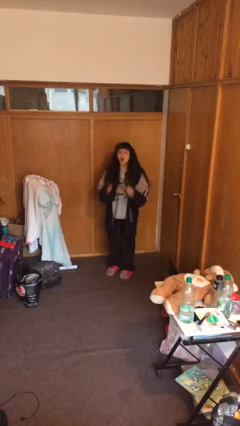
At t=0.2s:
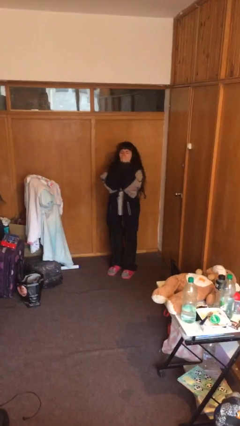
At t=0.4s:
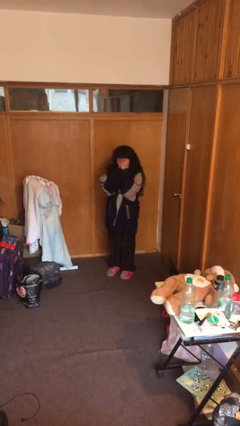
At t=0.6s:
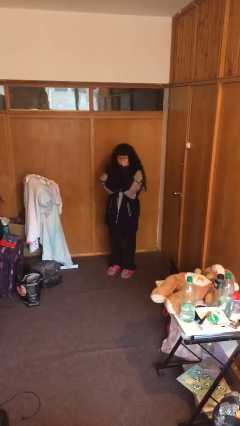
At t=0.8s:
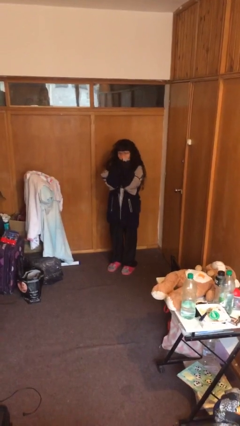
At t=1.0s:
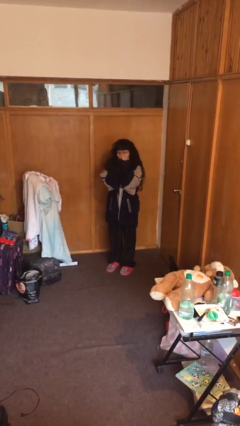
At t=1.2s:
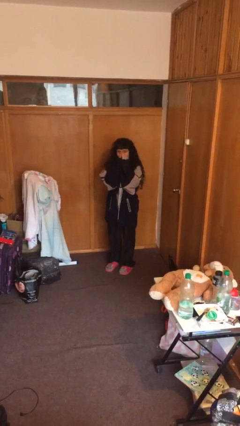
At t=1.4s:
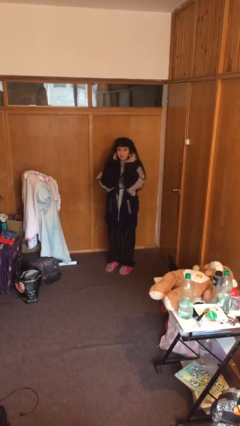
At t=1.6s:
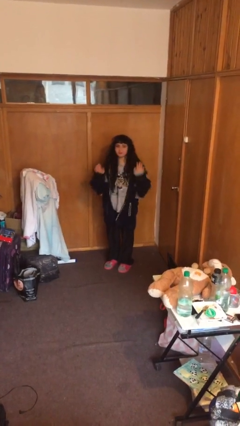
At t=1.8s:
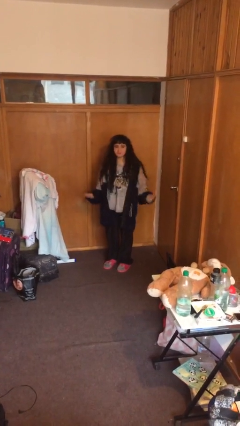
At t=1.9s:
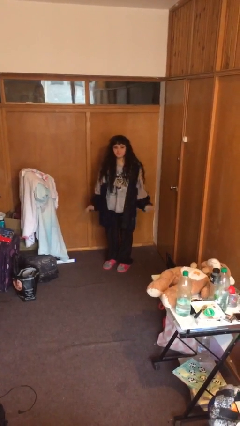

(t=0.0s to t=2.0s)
person sneezes into hand

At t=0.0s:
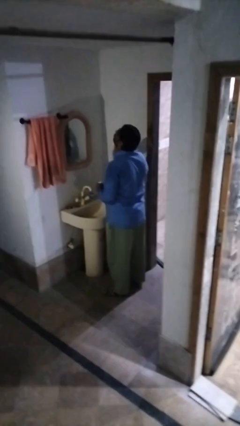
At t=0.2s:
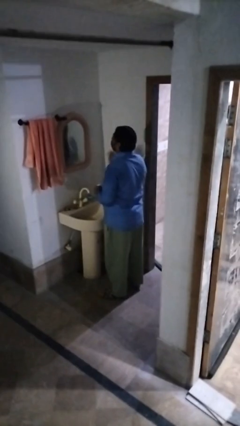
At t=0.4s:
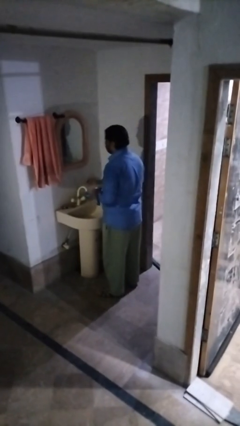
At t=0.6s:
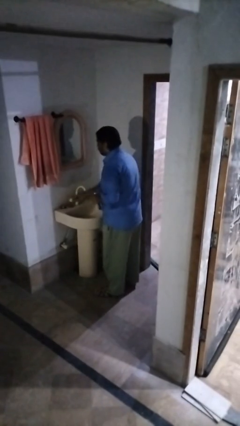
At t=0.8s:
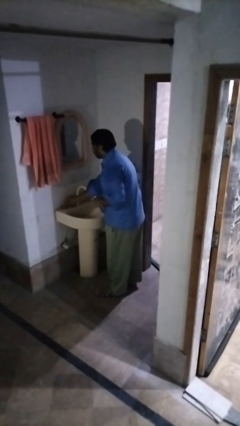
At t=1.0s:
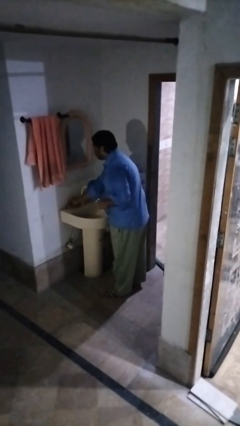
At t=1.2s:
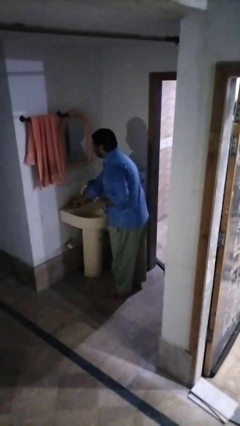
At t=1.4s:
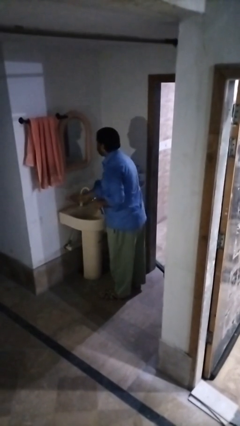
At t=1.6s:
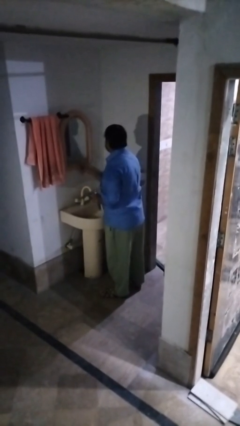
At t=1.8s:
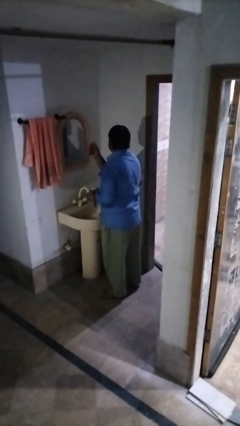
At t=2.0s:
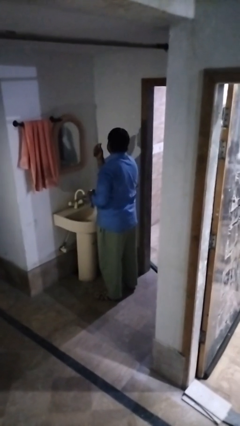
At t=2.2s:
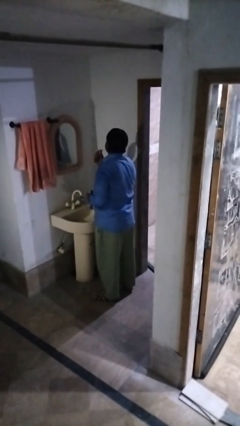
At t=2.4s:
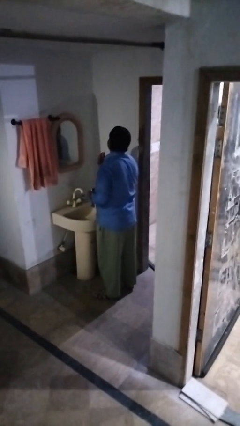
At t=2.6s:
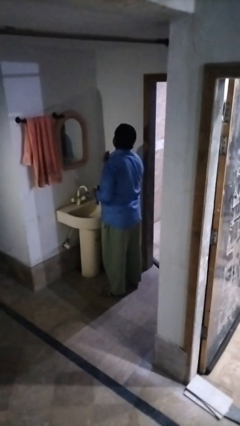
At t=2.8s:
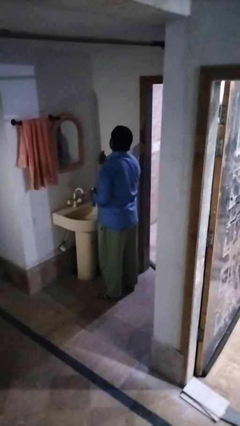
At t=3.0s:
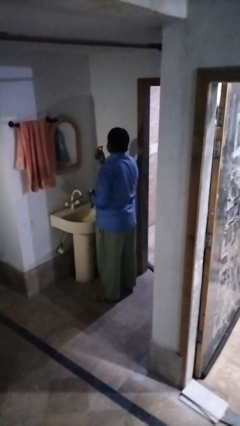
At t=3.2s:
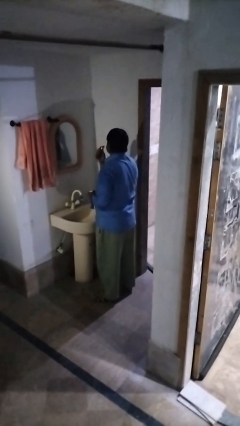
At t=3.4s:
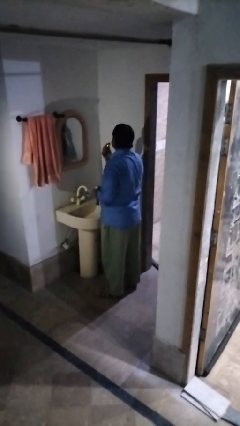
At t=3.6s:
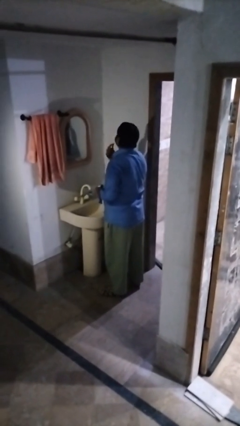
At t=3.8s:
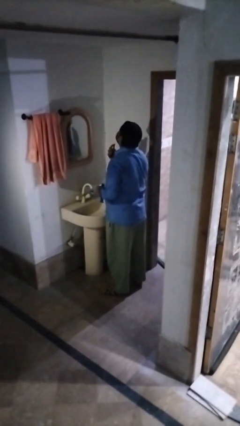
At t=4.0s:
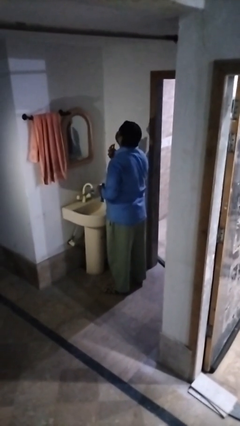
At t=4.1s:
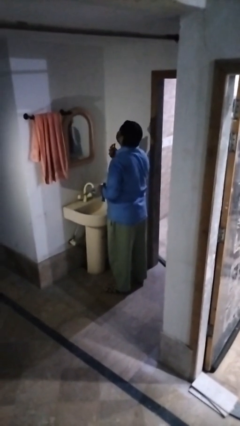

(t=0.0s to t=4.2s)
person shaves face

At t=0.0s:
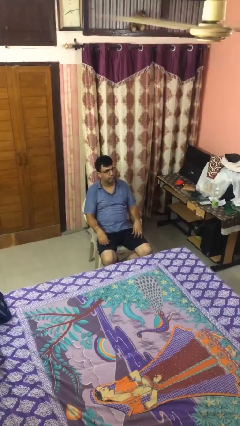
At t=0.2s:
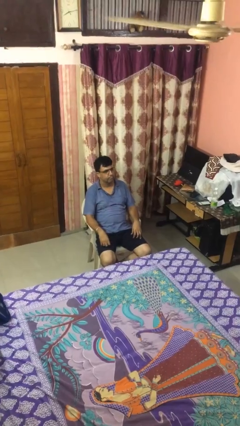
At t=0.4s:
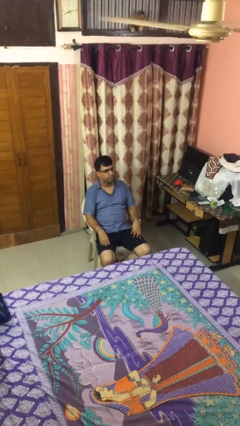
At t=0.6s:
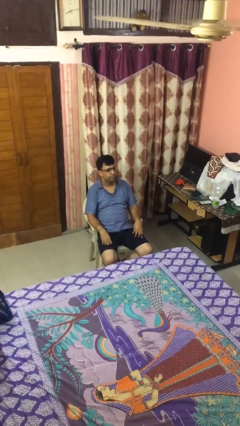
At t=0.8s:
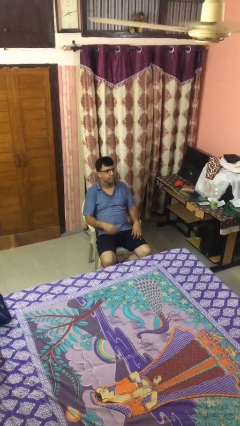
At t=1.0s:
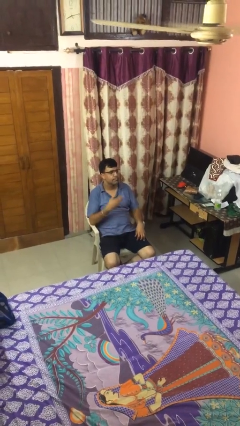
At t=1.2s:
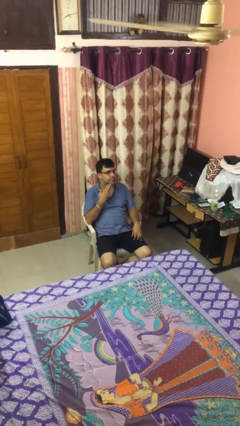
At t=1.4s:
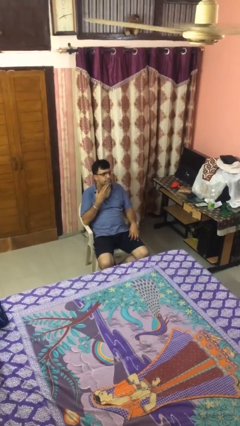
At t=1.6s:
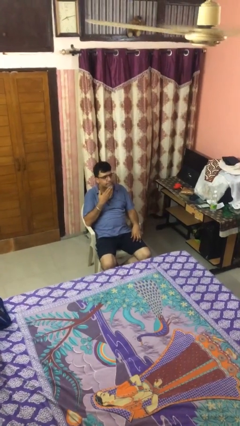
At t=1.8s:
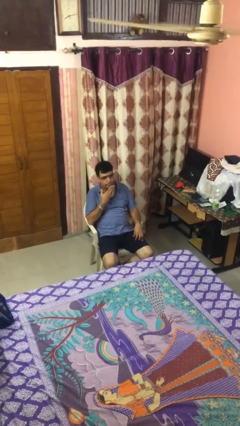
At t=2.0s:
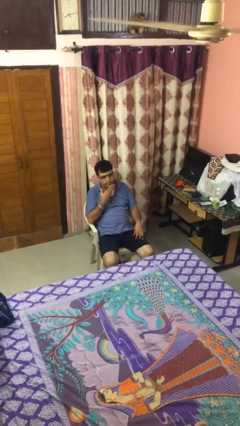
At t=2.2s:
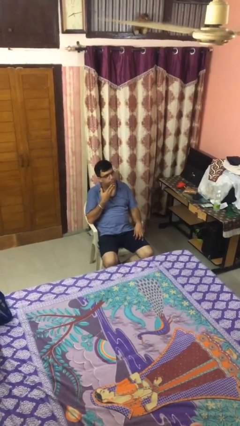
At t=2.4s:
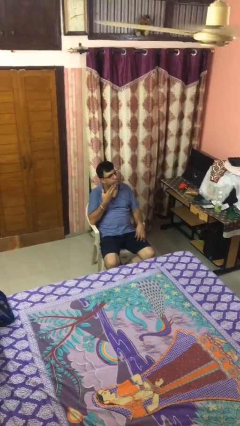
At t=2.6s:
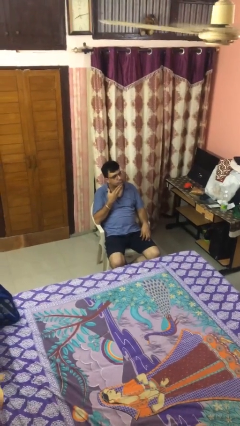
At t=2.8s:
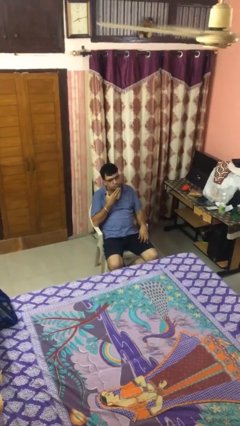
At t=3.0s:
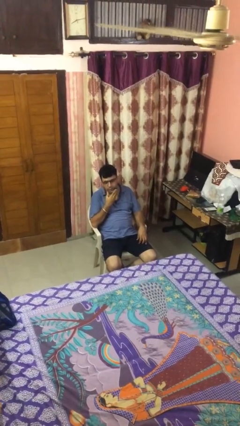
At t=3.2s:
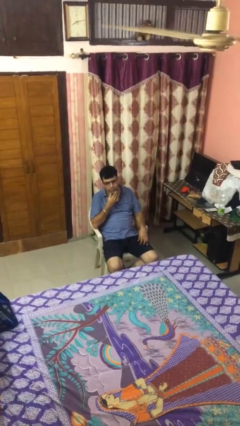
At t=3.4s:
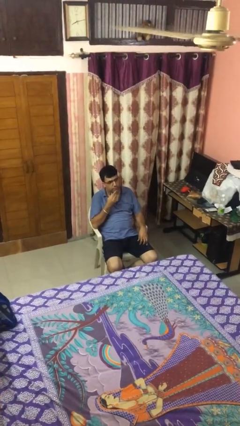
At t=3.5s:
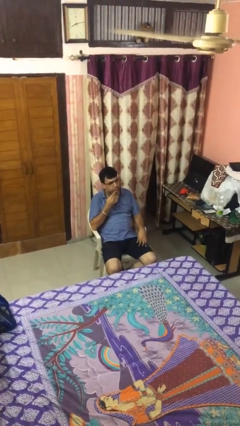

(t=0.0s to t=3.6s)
person strokes chin

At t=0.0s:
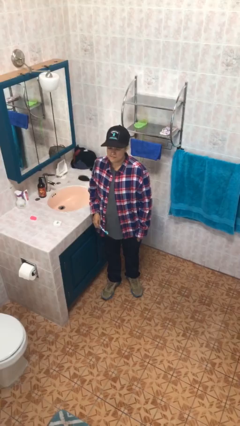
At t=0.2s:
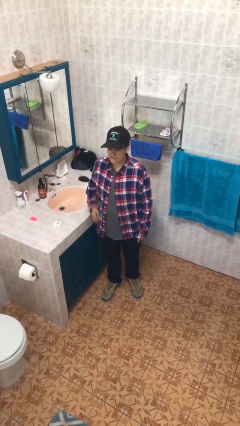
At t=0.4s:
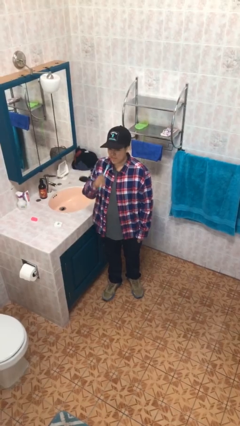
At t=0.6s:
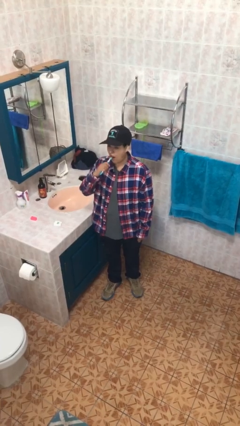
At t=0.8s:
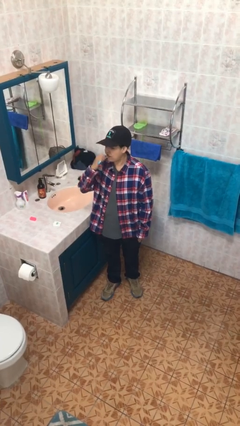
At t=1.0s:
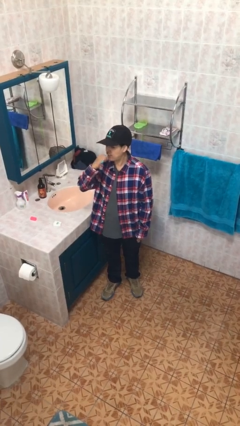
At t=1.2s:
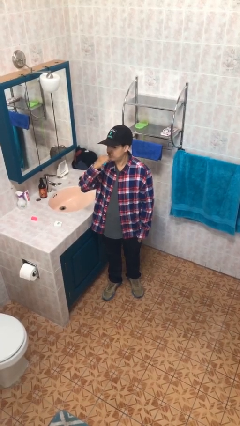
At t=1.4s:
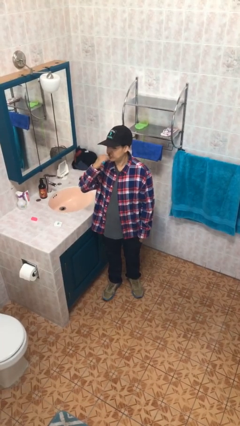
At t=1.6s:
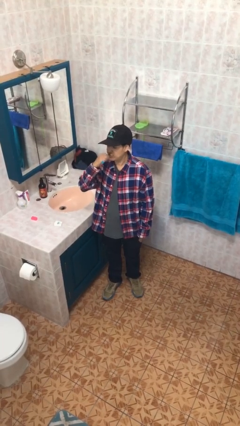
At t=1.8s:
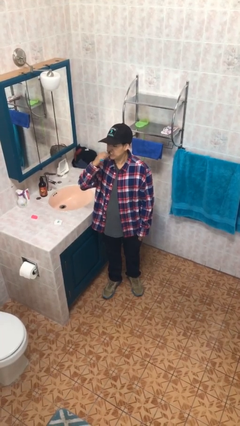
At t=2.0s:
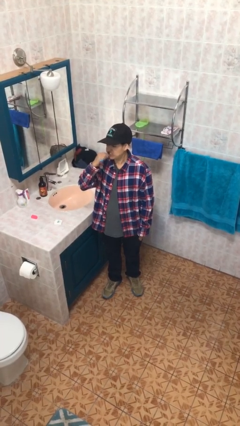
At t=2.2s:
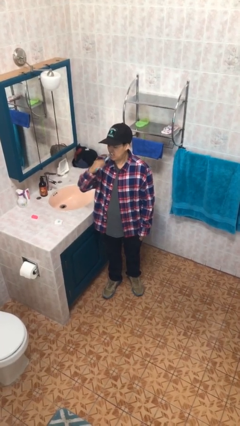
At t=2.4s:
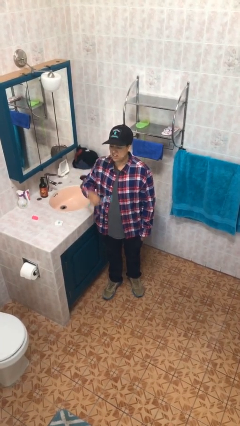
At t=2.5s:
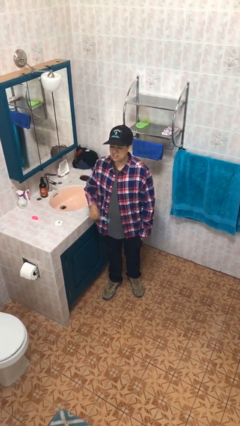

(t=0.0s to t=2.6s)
person brushes teeth

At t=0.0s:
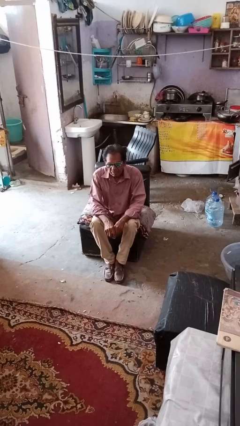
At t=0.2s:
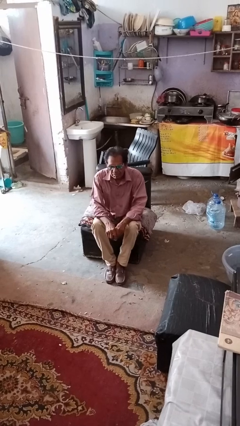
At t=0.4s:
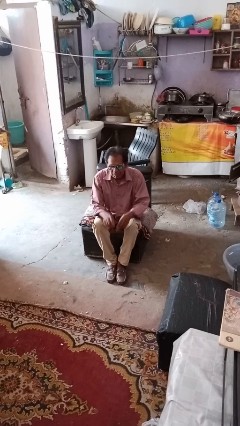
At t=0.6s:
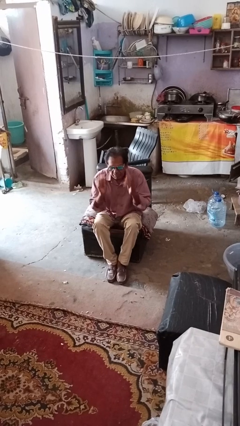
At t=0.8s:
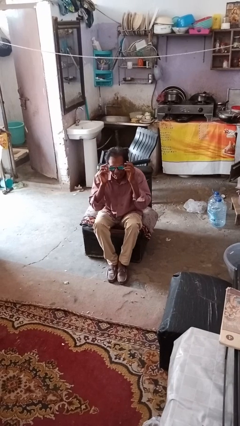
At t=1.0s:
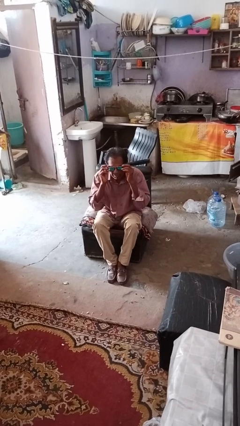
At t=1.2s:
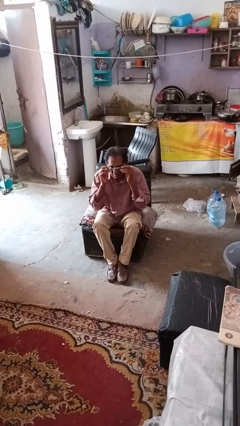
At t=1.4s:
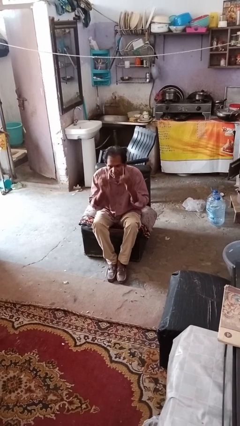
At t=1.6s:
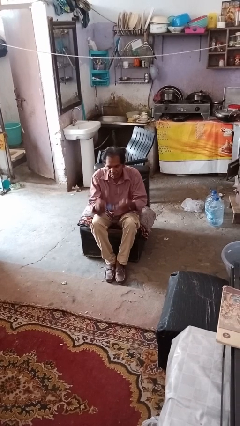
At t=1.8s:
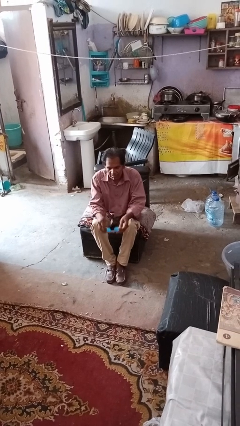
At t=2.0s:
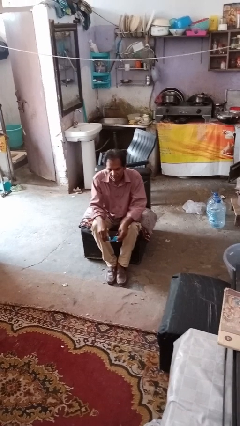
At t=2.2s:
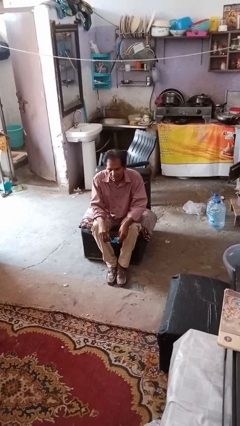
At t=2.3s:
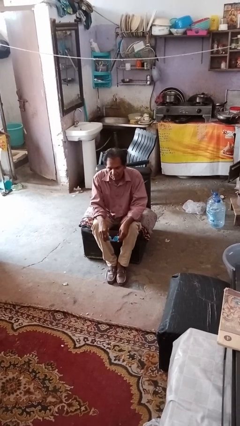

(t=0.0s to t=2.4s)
person takes off sunglasses

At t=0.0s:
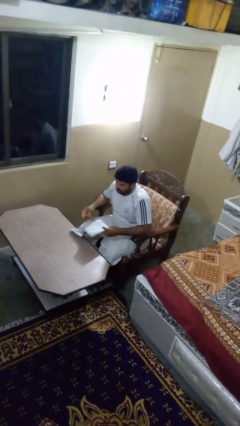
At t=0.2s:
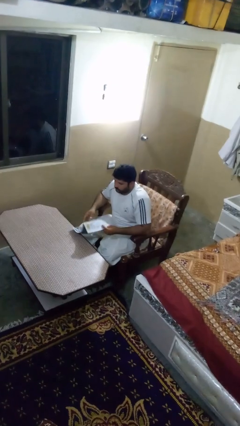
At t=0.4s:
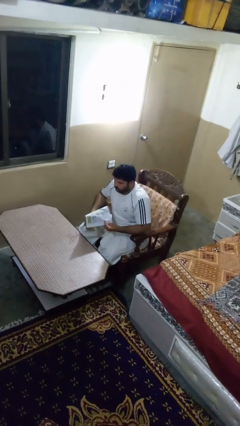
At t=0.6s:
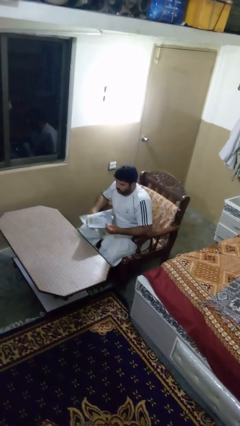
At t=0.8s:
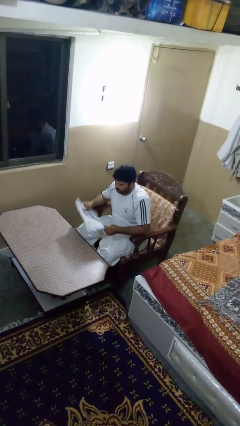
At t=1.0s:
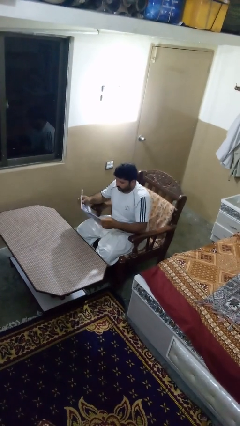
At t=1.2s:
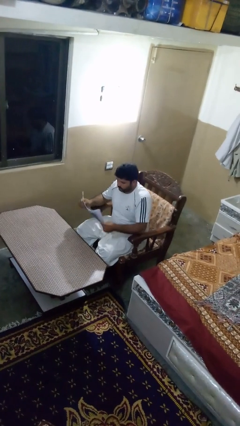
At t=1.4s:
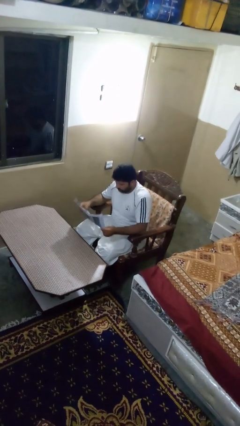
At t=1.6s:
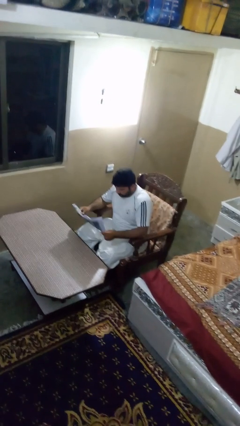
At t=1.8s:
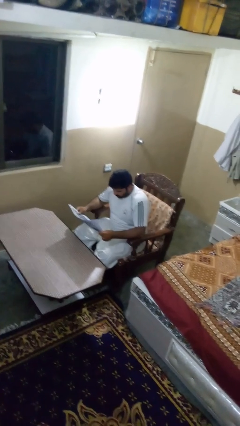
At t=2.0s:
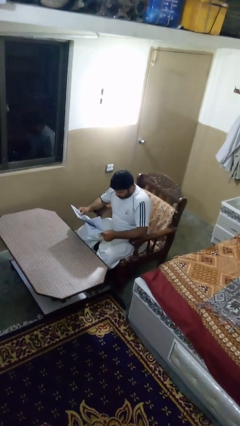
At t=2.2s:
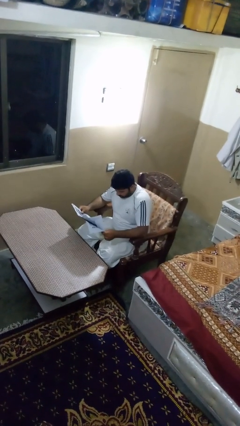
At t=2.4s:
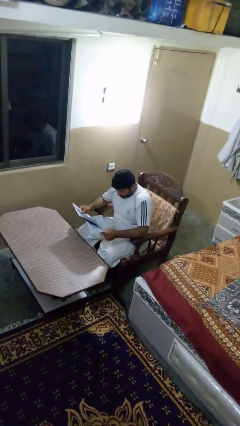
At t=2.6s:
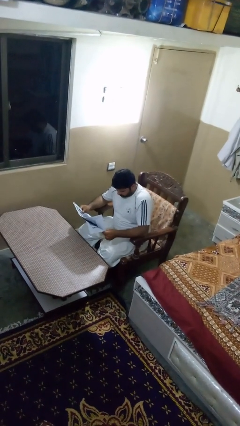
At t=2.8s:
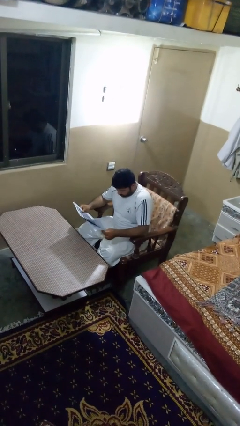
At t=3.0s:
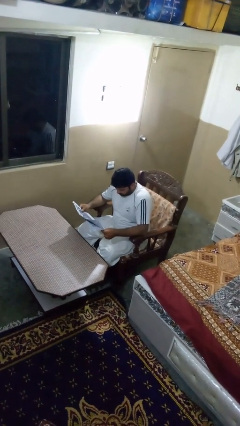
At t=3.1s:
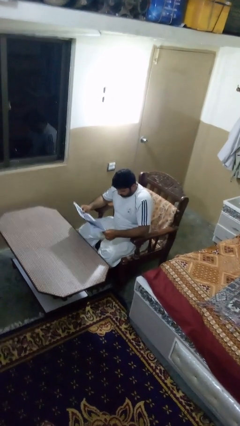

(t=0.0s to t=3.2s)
person reads newspaper
